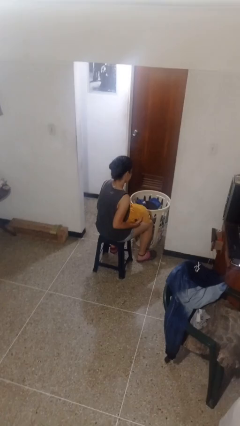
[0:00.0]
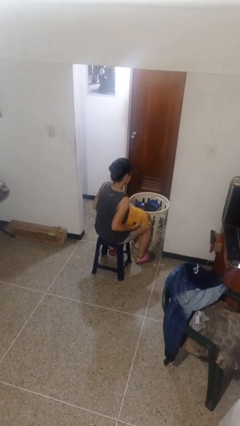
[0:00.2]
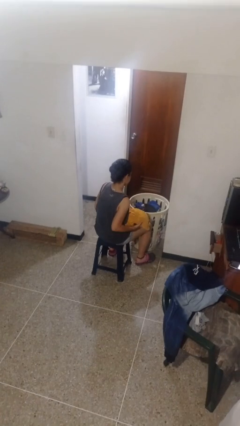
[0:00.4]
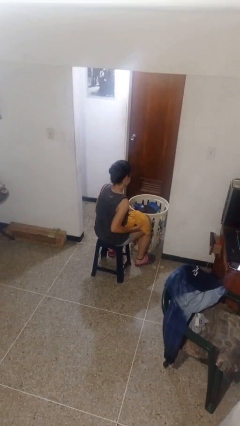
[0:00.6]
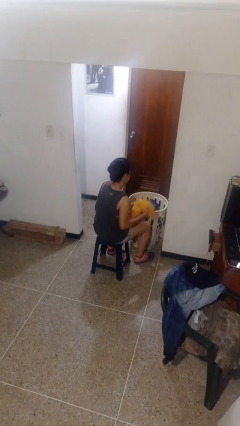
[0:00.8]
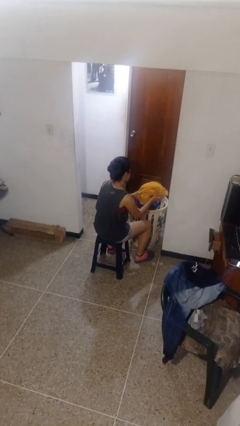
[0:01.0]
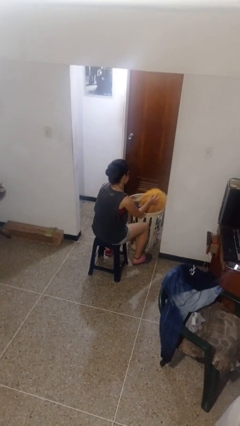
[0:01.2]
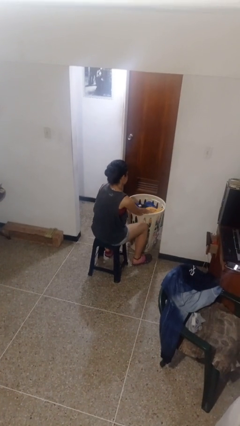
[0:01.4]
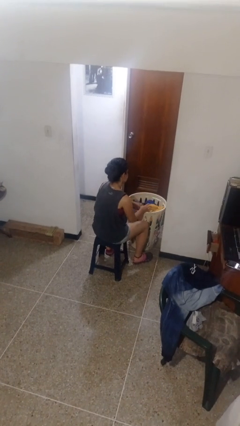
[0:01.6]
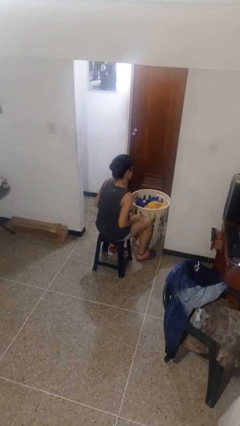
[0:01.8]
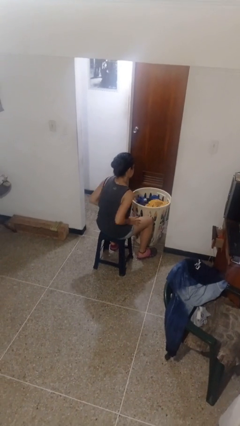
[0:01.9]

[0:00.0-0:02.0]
person puts object into basket

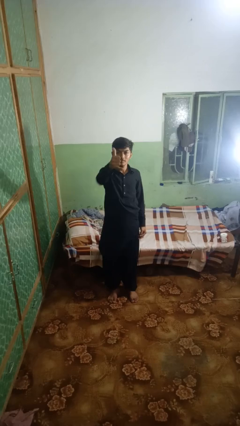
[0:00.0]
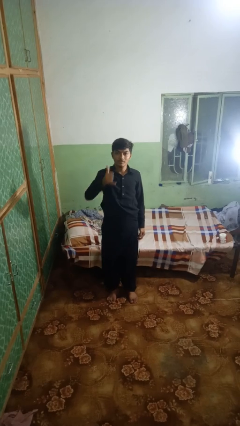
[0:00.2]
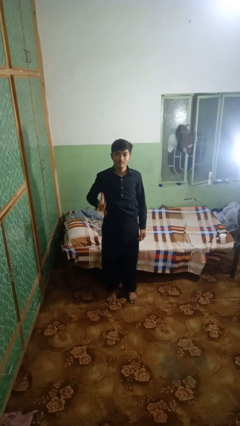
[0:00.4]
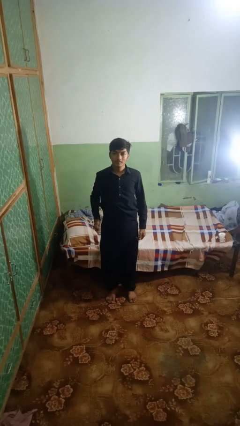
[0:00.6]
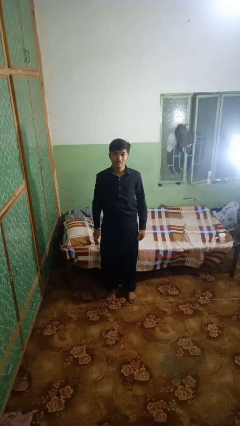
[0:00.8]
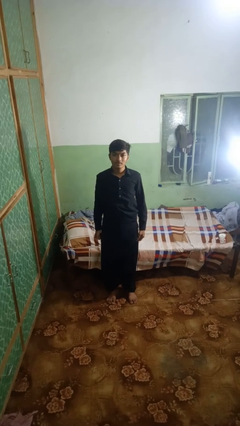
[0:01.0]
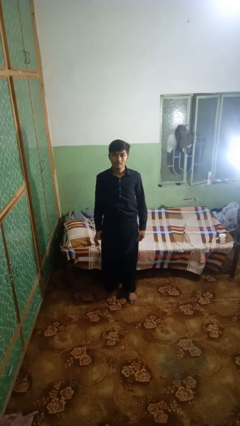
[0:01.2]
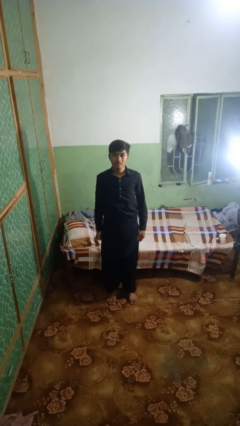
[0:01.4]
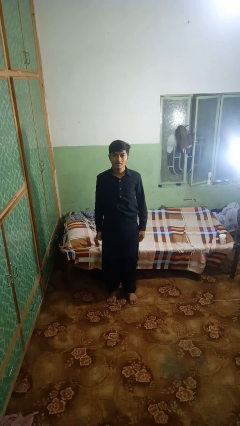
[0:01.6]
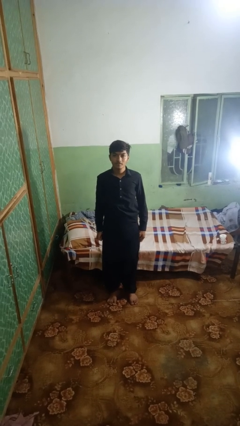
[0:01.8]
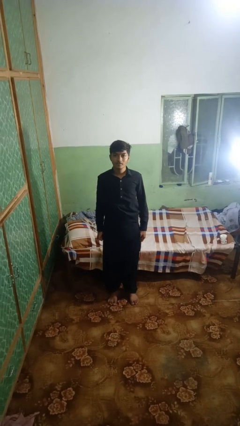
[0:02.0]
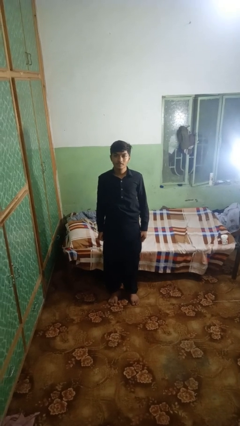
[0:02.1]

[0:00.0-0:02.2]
person gestures hang loose

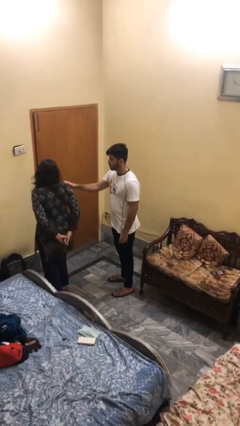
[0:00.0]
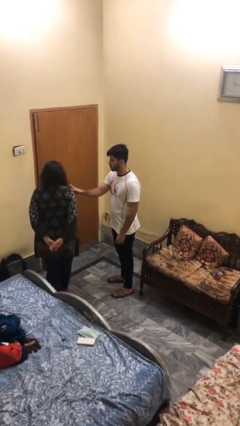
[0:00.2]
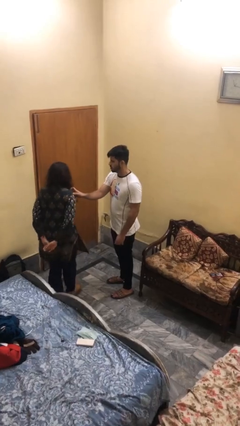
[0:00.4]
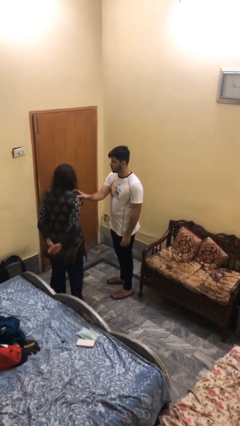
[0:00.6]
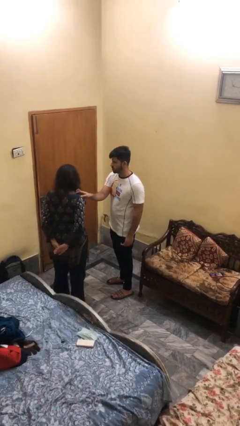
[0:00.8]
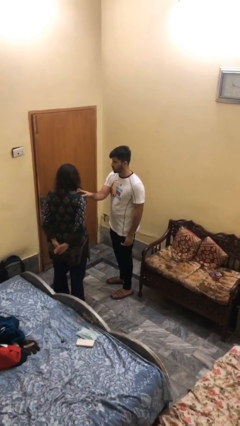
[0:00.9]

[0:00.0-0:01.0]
person spins person around

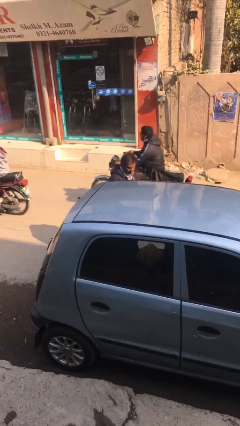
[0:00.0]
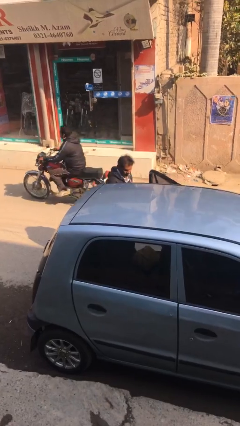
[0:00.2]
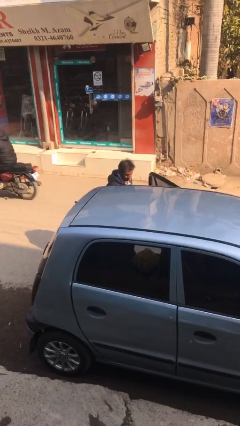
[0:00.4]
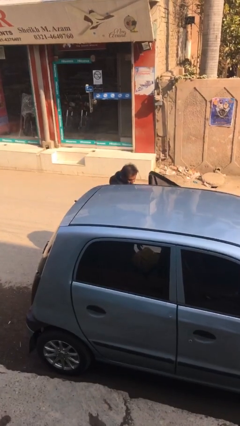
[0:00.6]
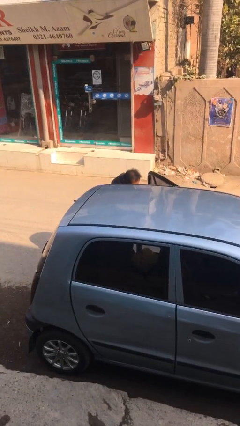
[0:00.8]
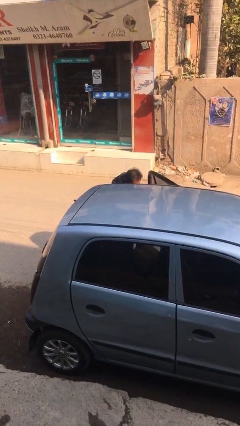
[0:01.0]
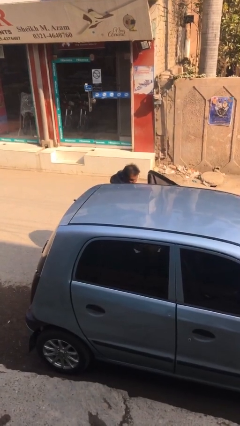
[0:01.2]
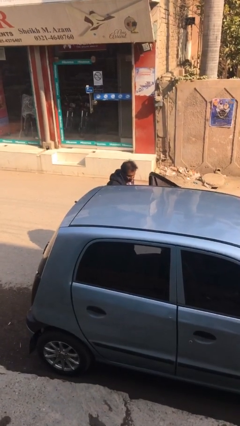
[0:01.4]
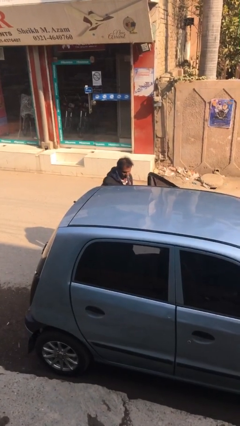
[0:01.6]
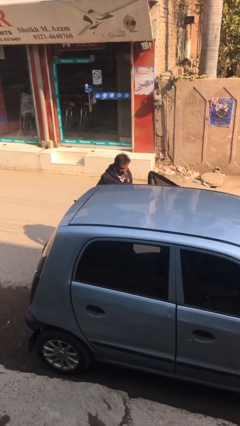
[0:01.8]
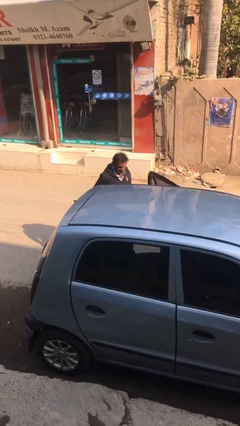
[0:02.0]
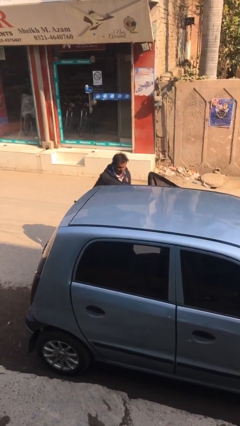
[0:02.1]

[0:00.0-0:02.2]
person unloads car

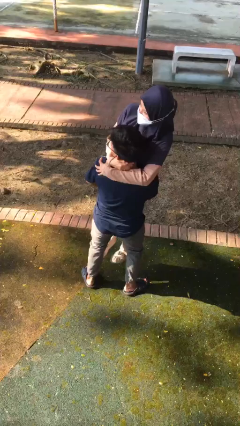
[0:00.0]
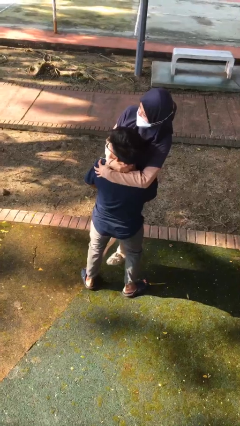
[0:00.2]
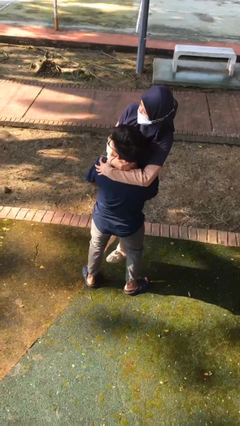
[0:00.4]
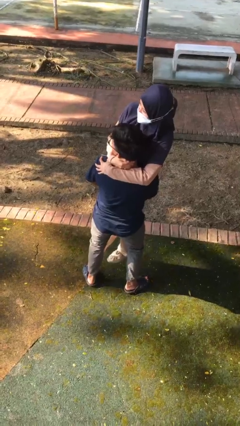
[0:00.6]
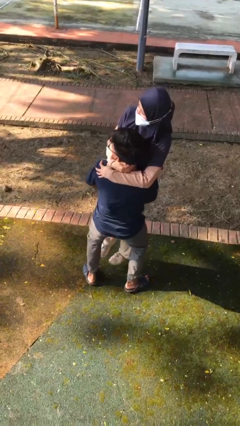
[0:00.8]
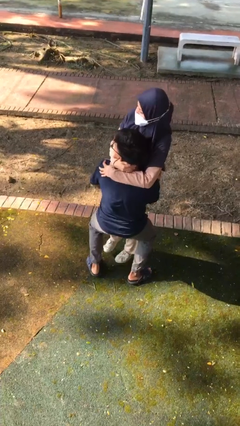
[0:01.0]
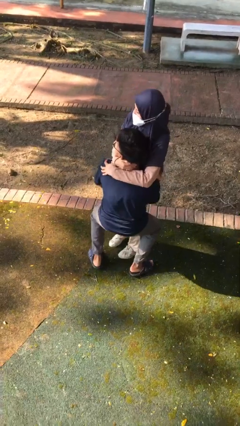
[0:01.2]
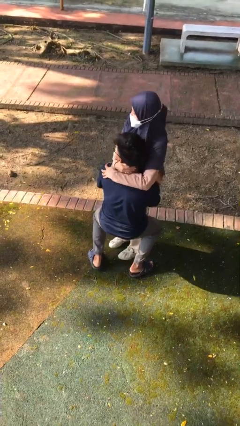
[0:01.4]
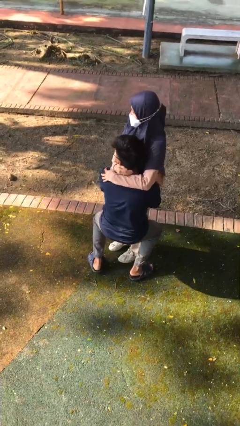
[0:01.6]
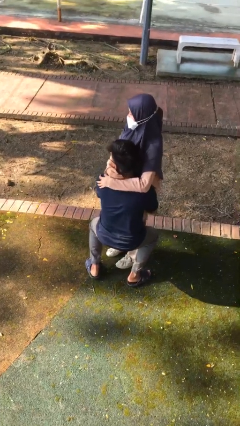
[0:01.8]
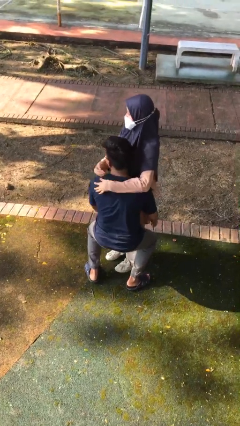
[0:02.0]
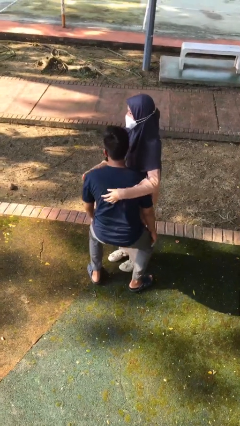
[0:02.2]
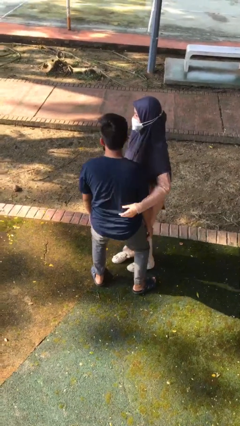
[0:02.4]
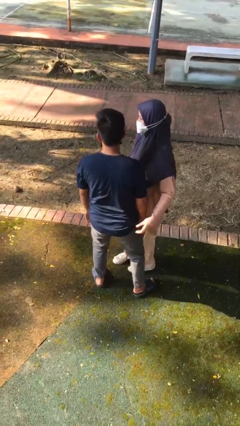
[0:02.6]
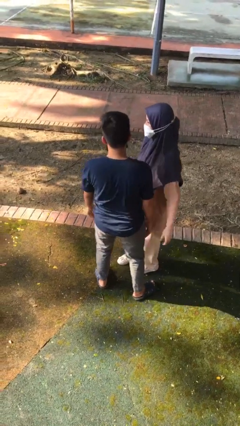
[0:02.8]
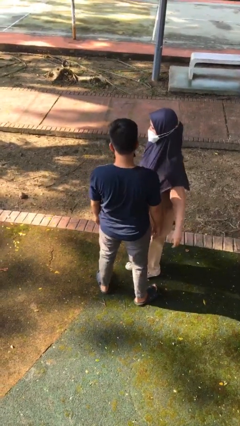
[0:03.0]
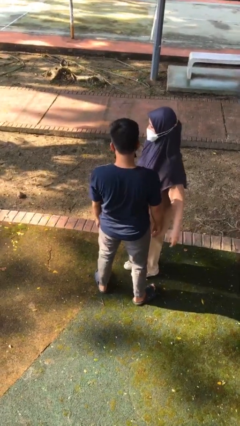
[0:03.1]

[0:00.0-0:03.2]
person puts down person

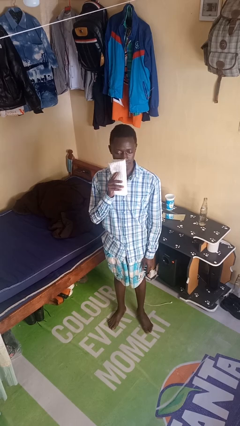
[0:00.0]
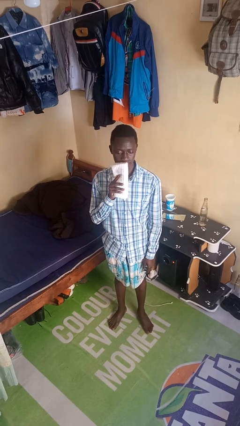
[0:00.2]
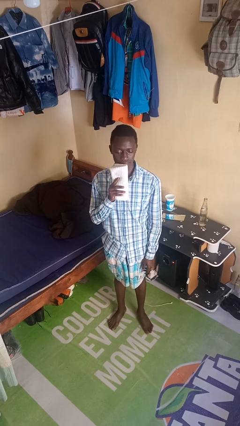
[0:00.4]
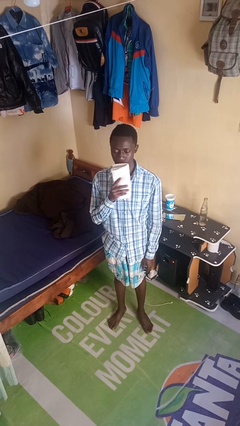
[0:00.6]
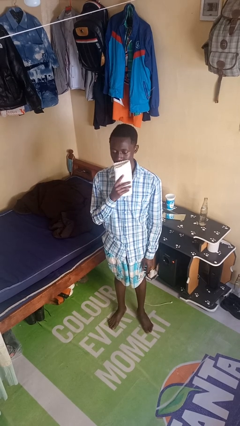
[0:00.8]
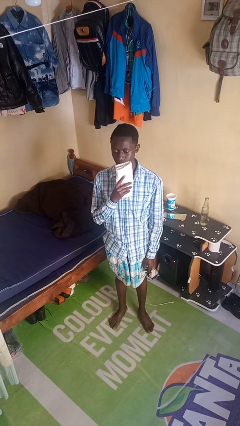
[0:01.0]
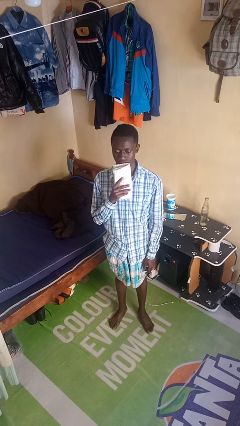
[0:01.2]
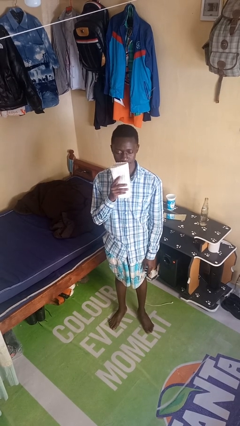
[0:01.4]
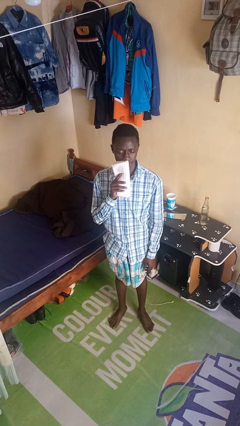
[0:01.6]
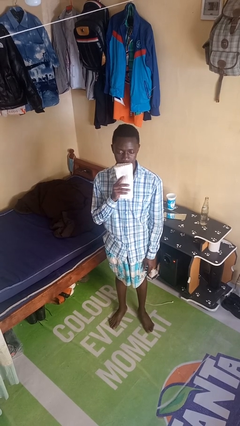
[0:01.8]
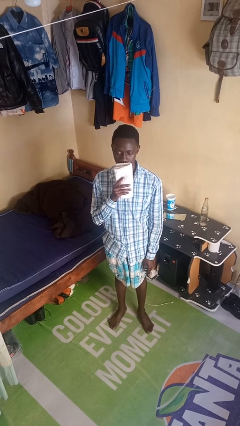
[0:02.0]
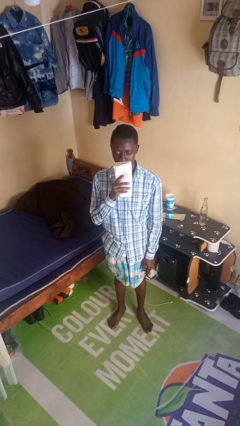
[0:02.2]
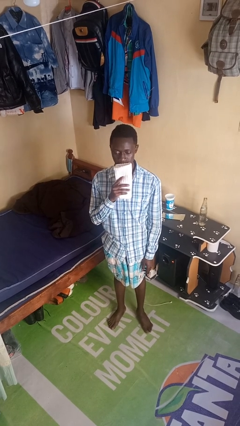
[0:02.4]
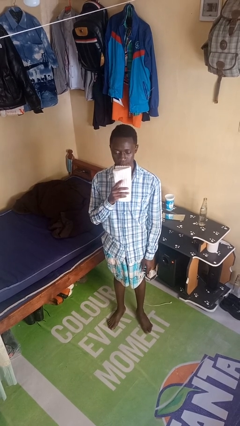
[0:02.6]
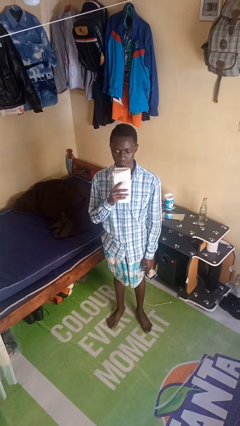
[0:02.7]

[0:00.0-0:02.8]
person wipes mouth with napkin

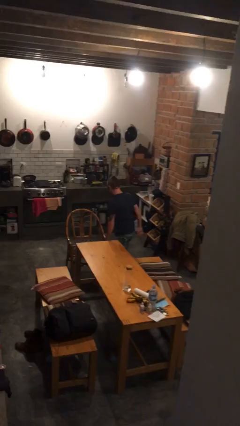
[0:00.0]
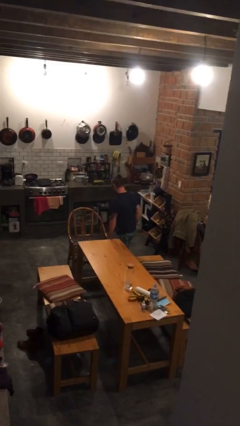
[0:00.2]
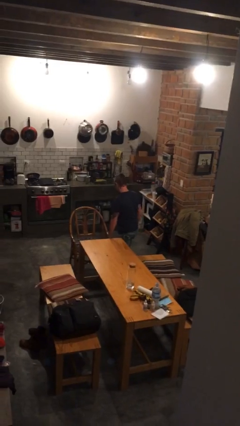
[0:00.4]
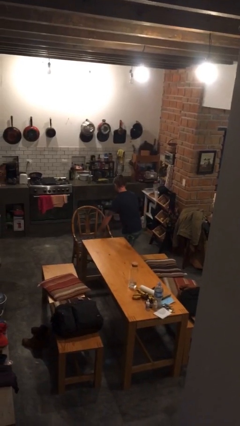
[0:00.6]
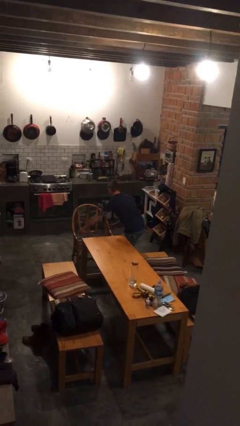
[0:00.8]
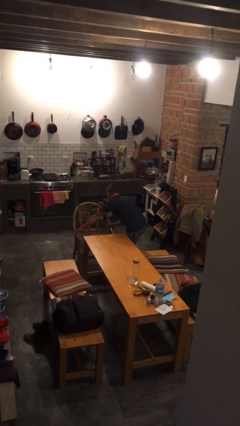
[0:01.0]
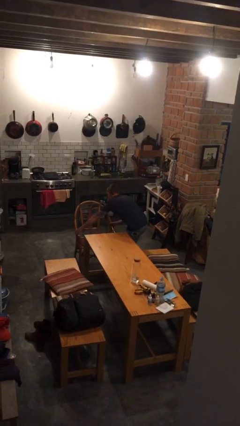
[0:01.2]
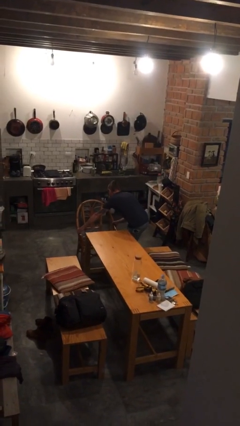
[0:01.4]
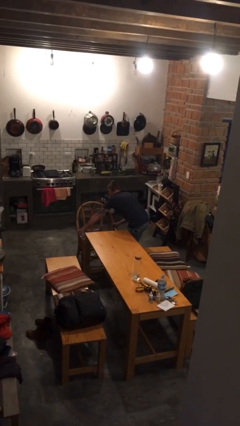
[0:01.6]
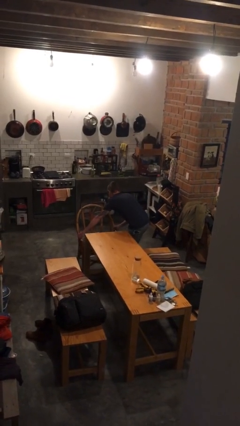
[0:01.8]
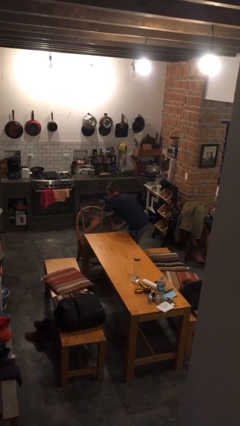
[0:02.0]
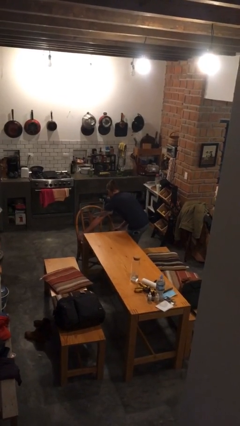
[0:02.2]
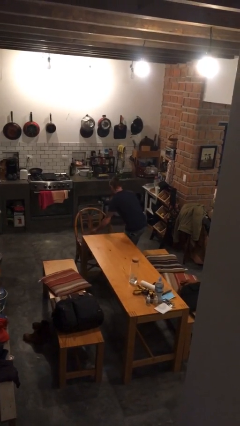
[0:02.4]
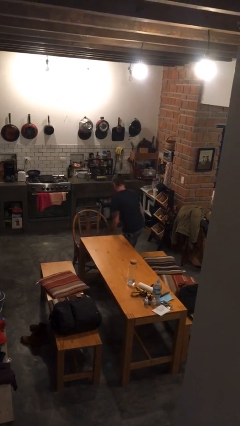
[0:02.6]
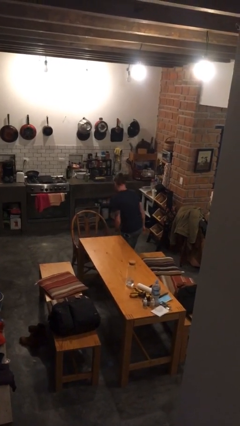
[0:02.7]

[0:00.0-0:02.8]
person pushes in chair

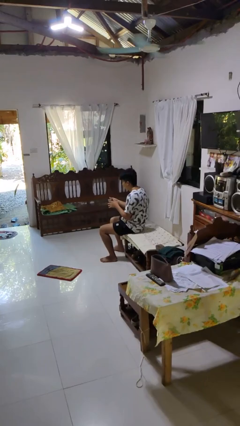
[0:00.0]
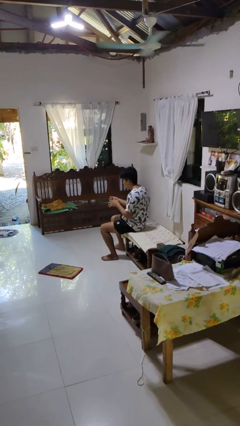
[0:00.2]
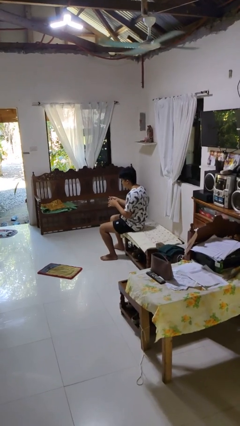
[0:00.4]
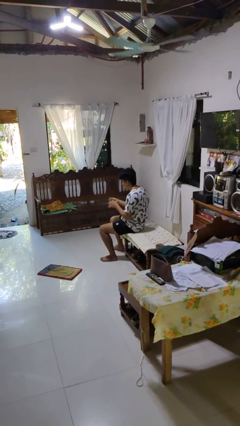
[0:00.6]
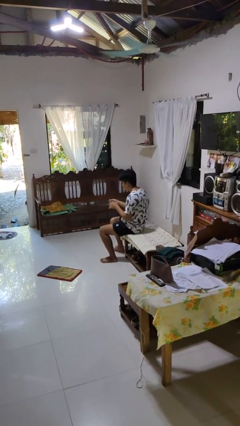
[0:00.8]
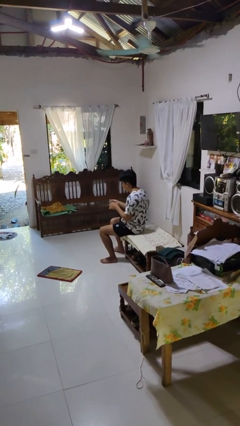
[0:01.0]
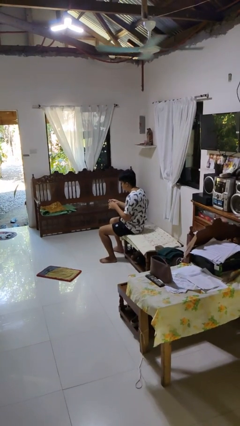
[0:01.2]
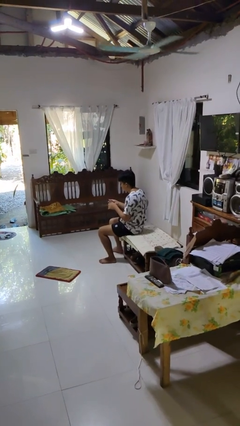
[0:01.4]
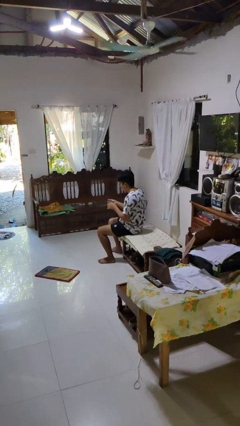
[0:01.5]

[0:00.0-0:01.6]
person clips fingernails
